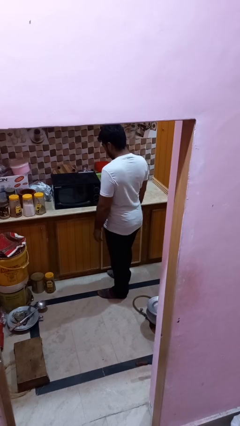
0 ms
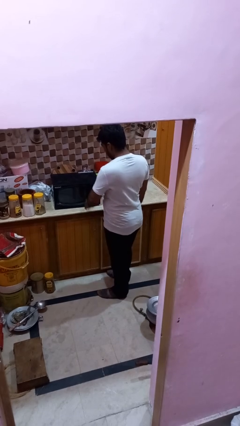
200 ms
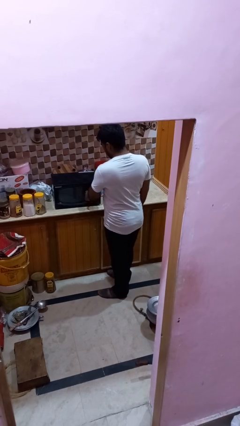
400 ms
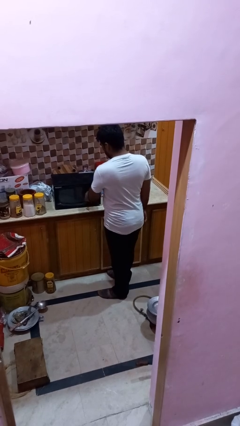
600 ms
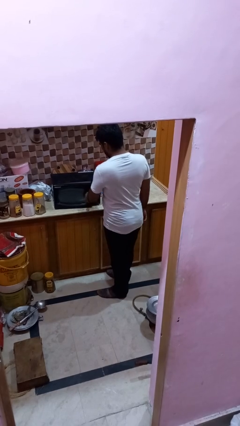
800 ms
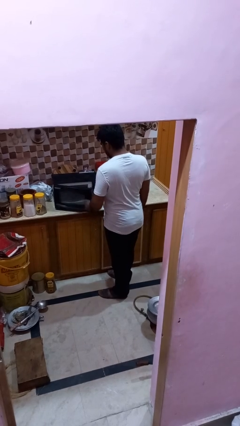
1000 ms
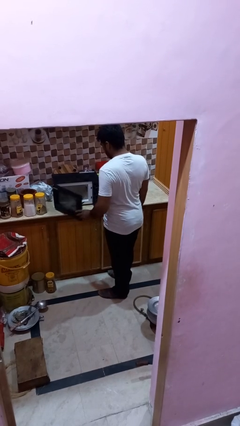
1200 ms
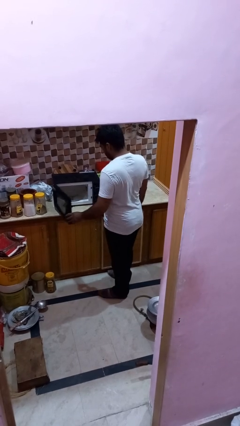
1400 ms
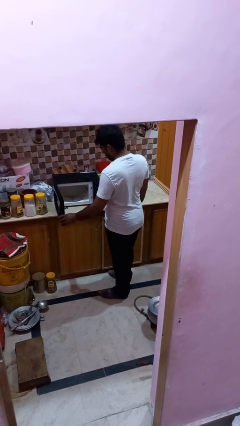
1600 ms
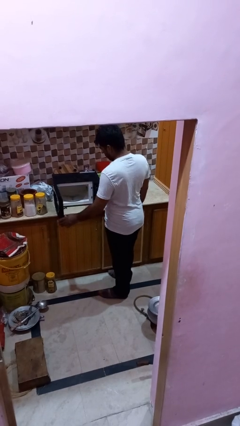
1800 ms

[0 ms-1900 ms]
person opens oven door

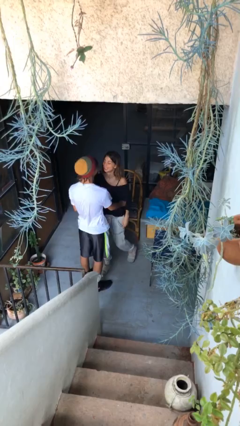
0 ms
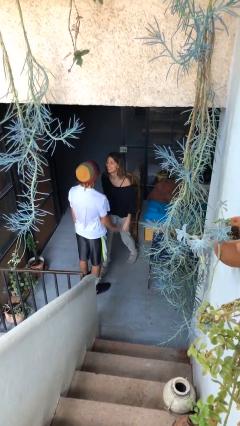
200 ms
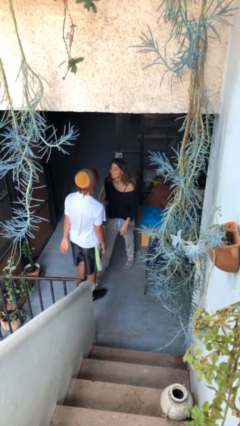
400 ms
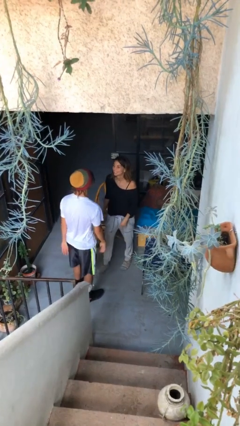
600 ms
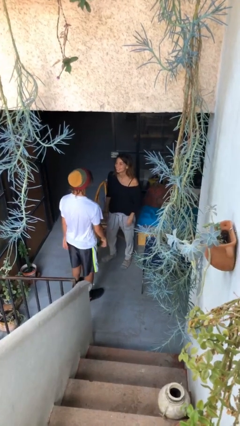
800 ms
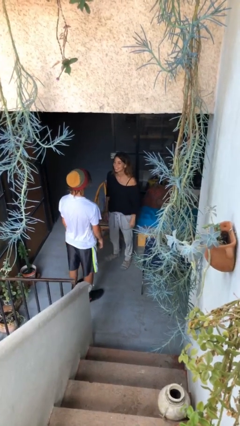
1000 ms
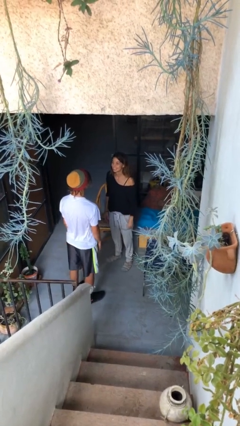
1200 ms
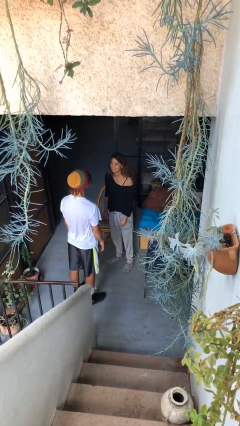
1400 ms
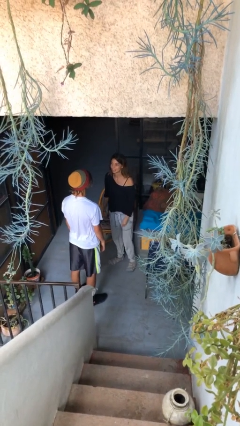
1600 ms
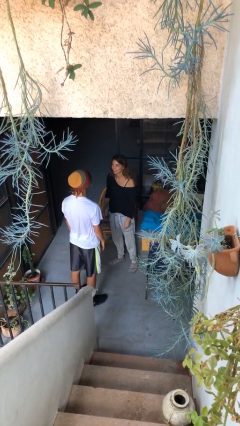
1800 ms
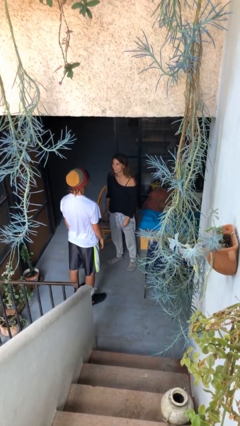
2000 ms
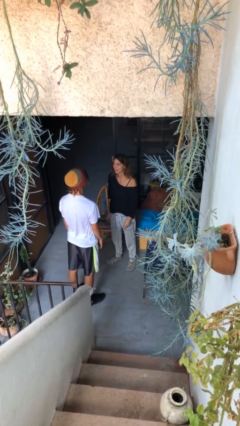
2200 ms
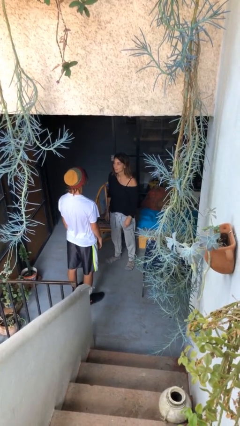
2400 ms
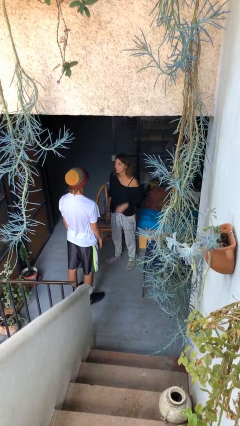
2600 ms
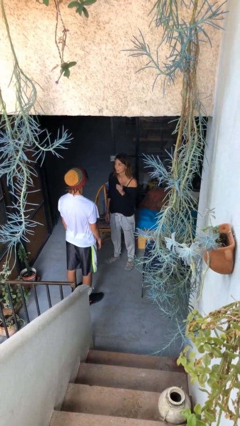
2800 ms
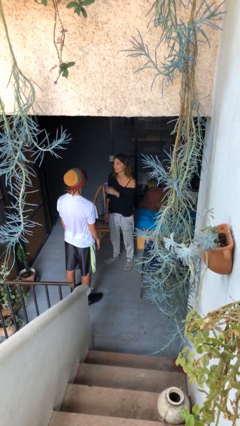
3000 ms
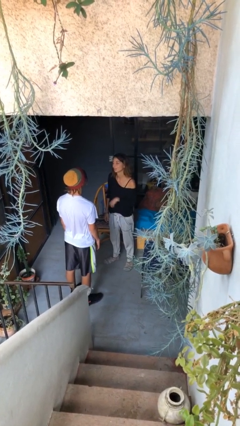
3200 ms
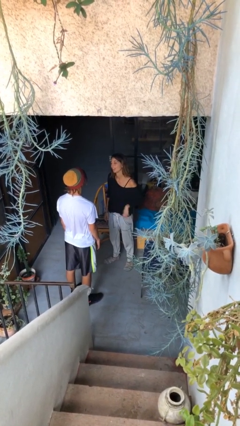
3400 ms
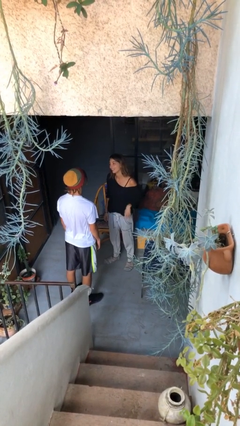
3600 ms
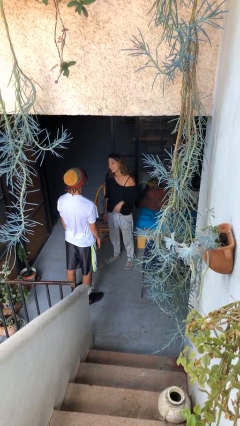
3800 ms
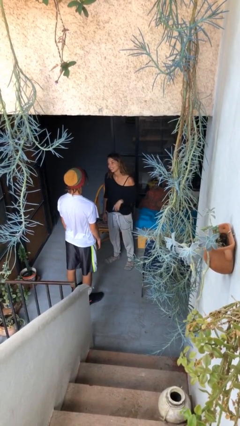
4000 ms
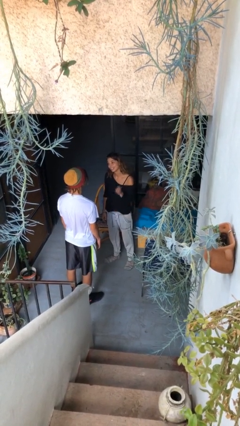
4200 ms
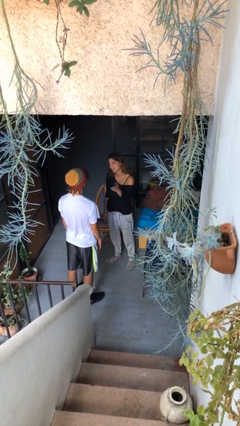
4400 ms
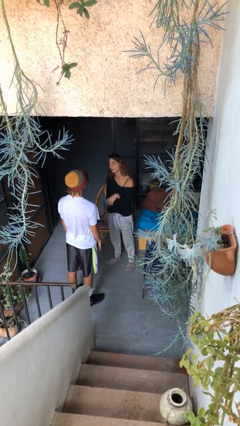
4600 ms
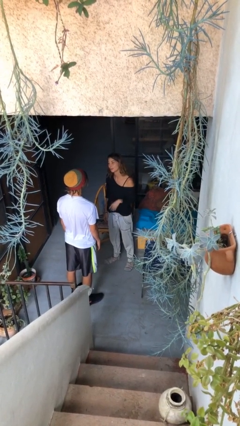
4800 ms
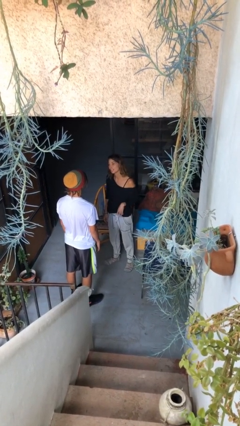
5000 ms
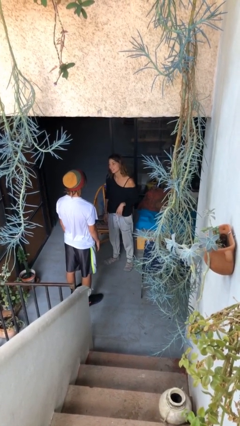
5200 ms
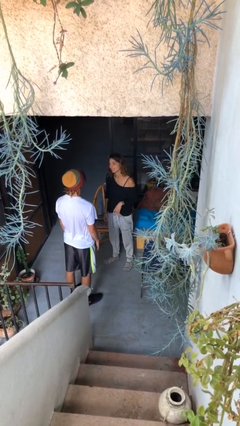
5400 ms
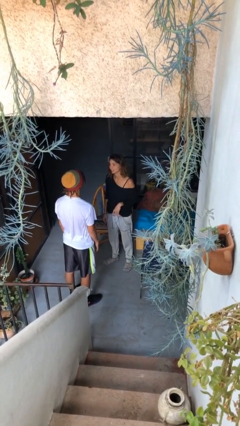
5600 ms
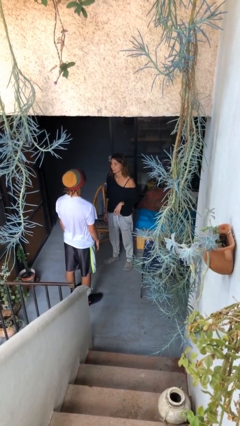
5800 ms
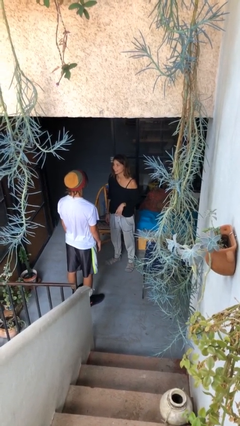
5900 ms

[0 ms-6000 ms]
person talks to person

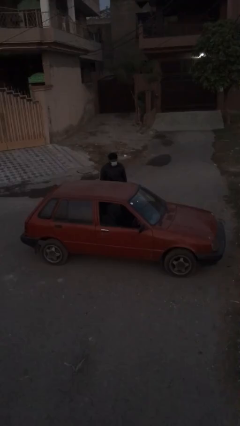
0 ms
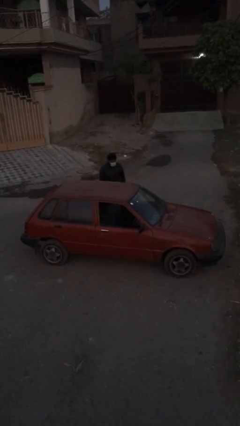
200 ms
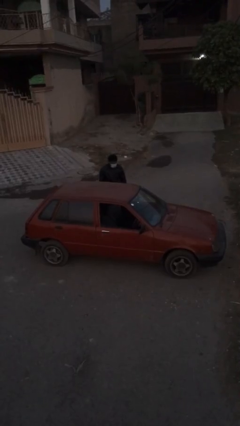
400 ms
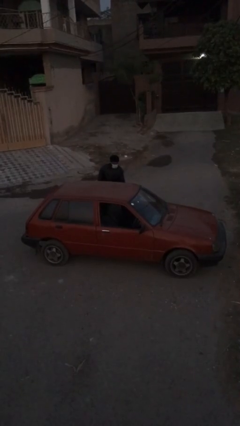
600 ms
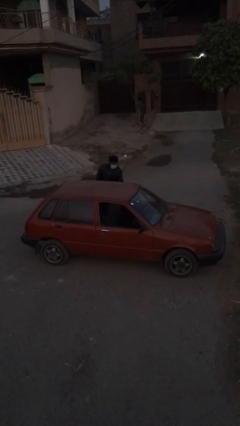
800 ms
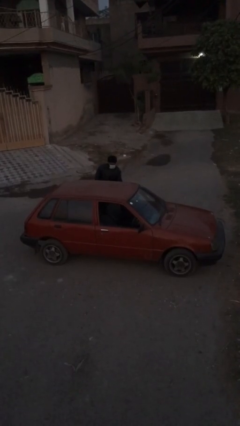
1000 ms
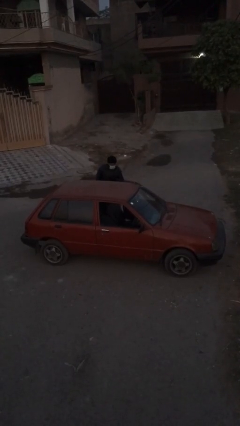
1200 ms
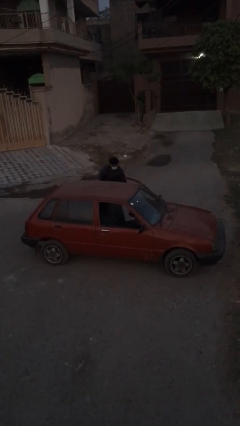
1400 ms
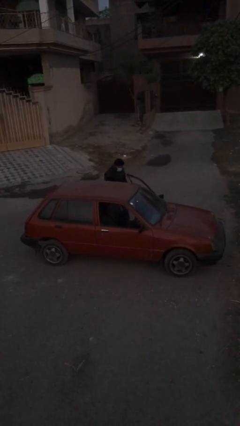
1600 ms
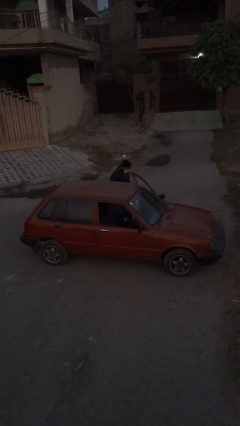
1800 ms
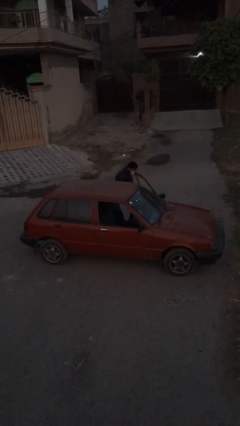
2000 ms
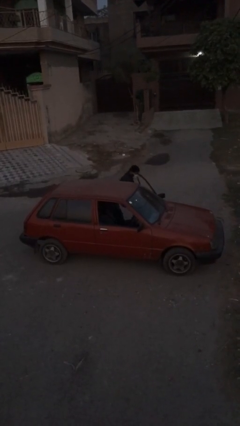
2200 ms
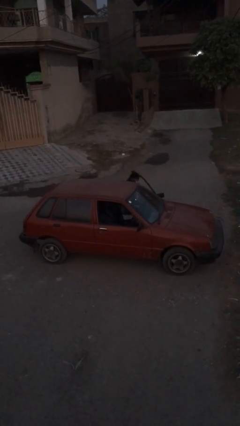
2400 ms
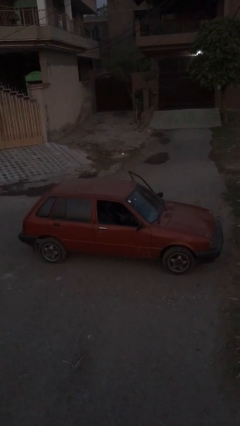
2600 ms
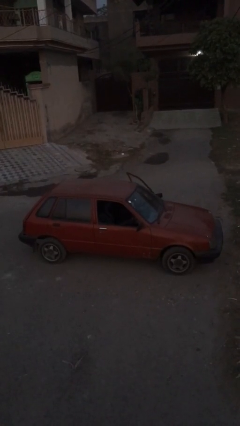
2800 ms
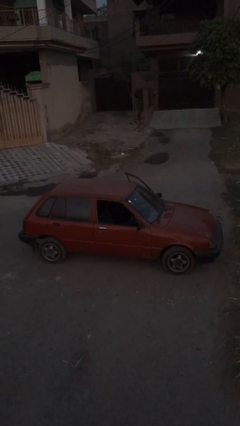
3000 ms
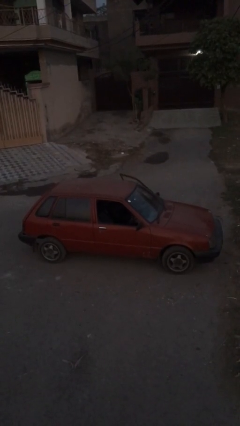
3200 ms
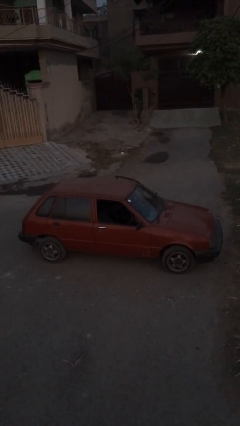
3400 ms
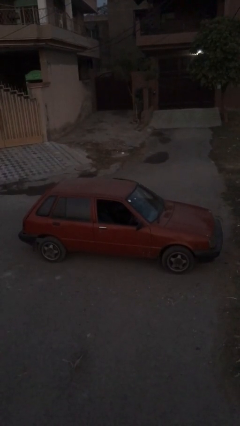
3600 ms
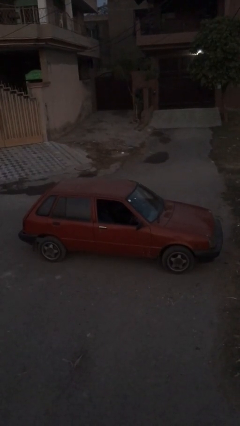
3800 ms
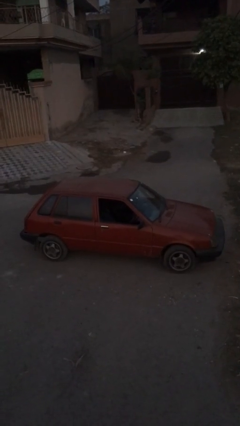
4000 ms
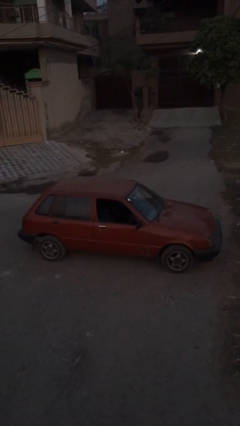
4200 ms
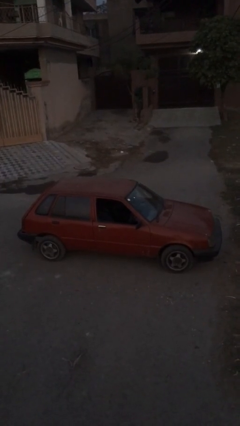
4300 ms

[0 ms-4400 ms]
car picks up person

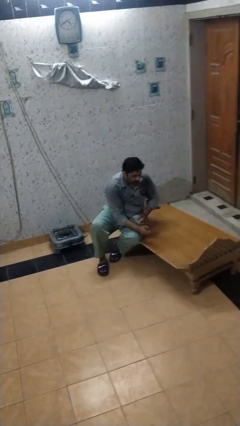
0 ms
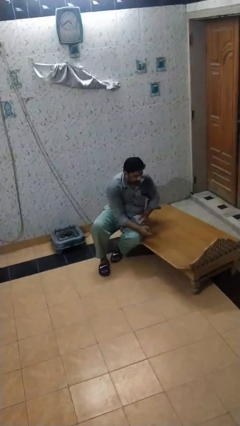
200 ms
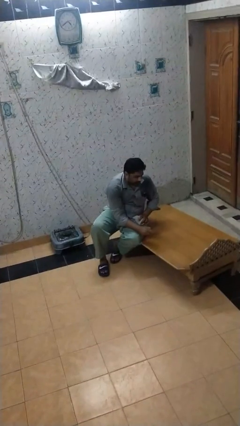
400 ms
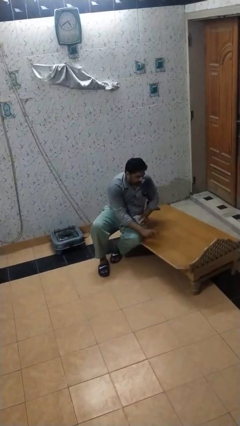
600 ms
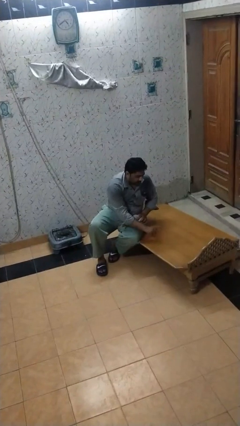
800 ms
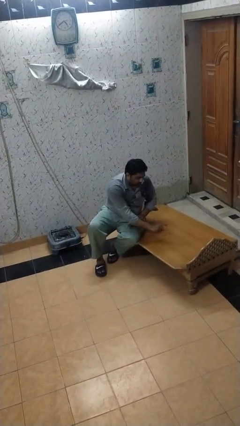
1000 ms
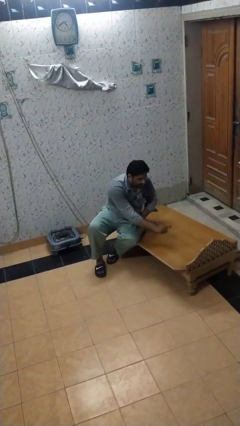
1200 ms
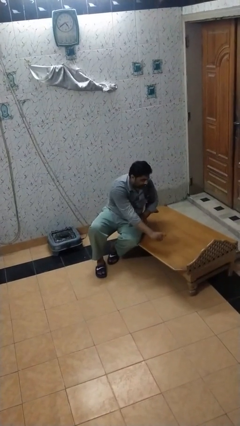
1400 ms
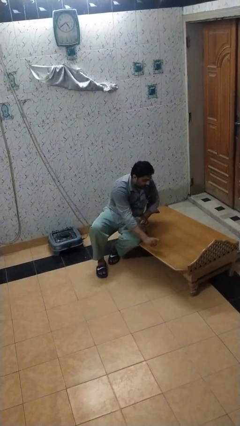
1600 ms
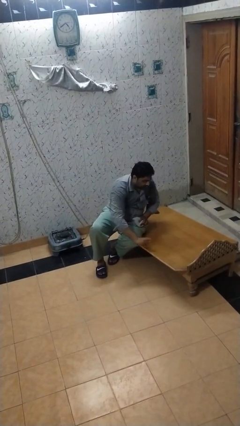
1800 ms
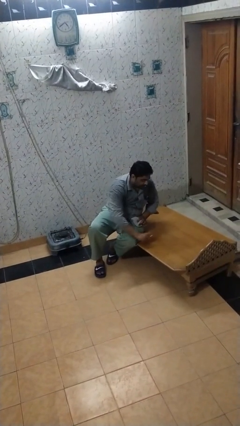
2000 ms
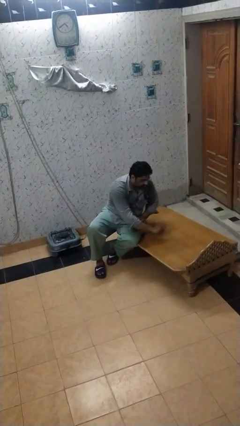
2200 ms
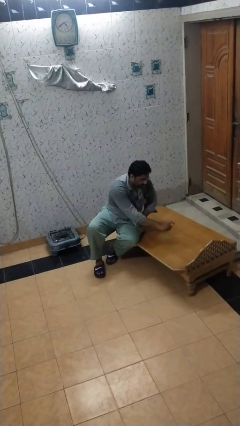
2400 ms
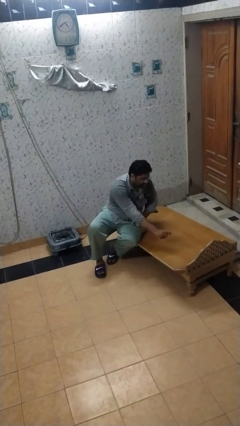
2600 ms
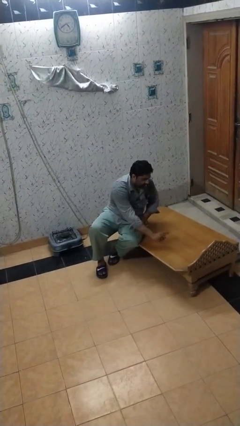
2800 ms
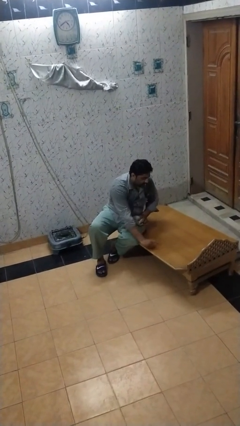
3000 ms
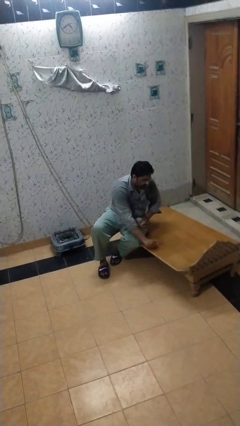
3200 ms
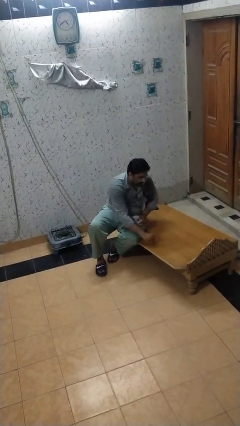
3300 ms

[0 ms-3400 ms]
person sprays from bottle

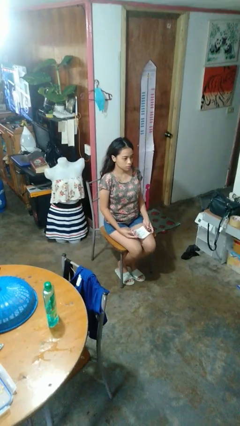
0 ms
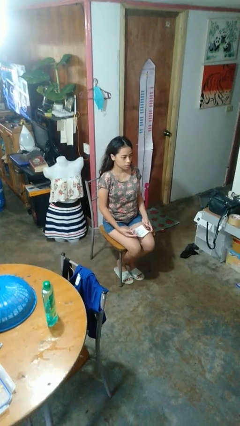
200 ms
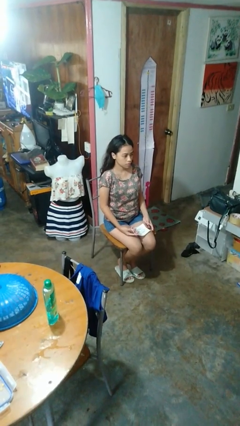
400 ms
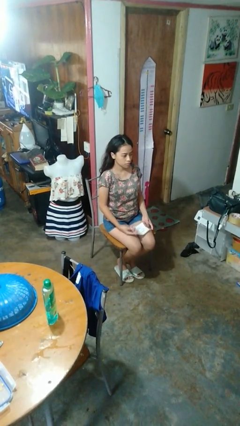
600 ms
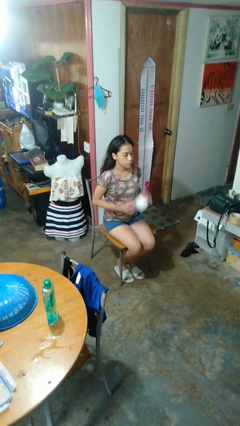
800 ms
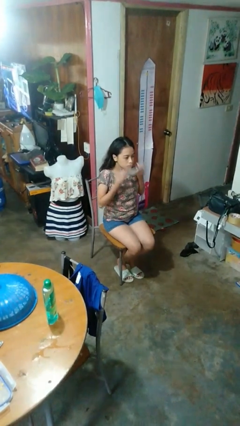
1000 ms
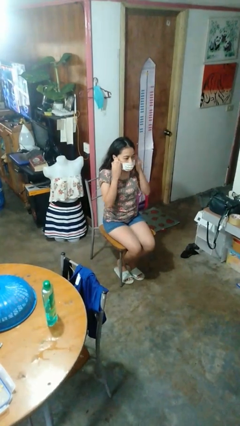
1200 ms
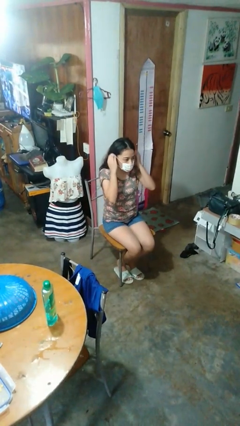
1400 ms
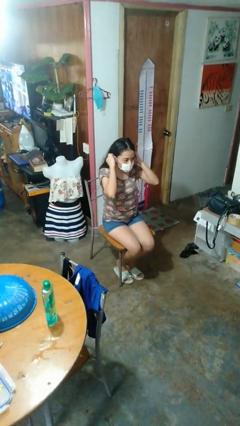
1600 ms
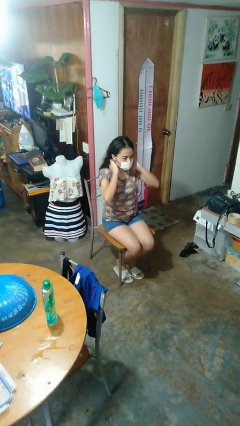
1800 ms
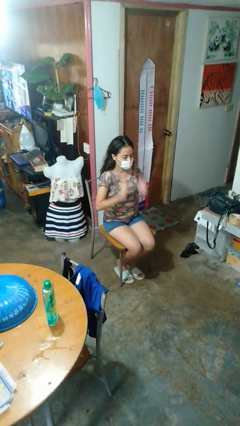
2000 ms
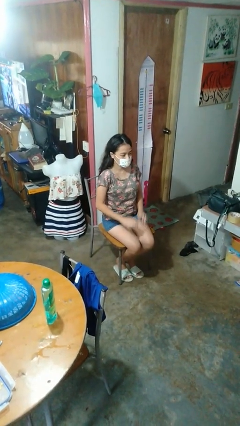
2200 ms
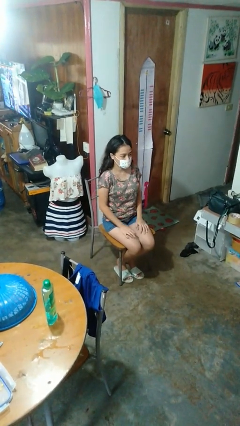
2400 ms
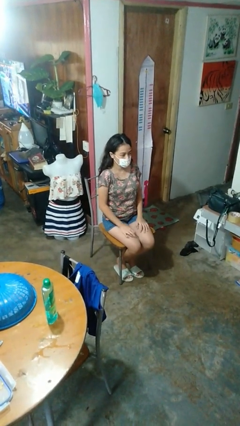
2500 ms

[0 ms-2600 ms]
person opens mailbox
